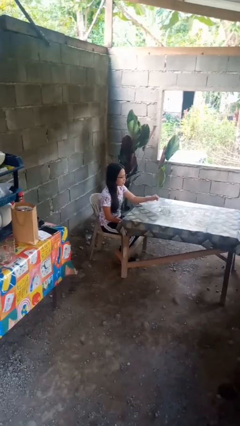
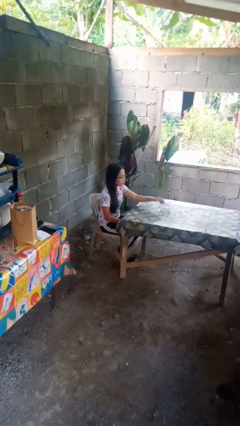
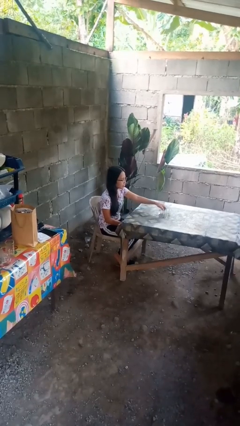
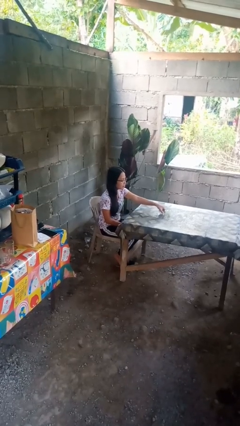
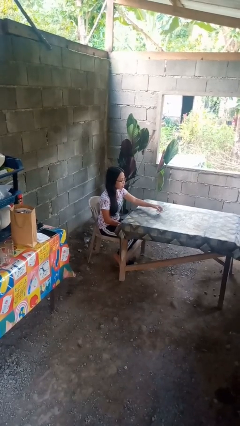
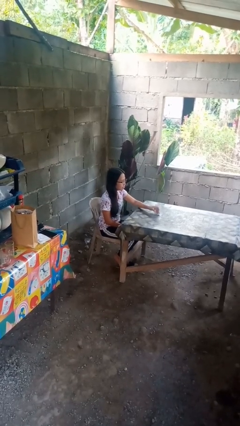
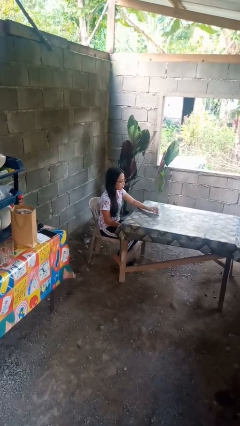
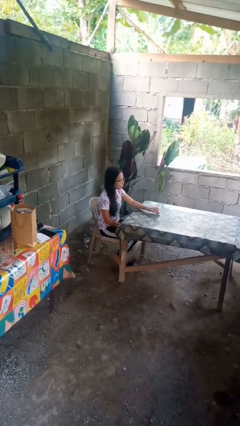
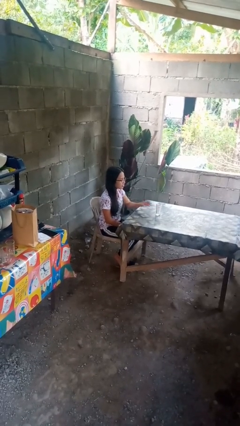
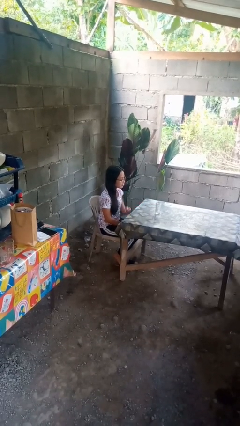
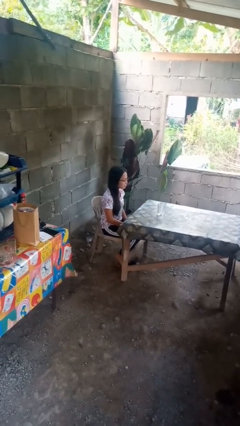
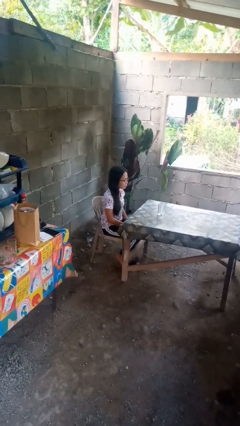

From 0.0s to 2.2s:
person sets upright glass

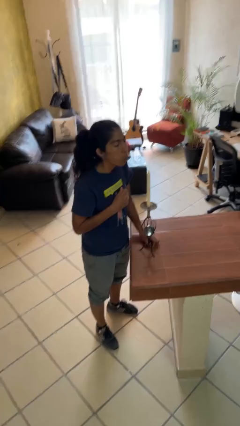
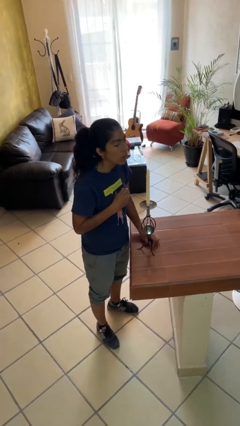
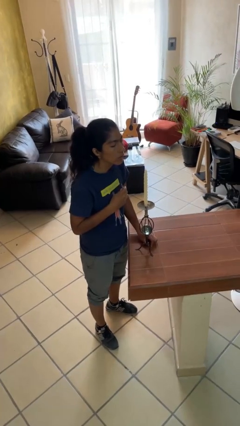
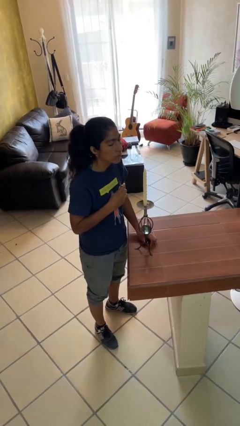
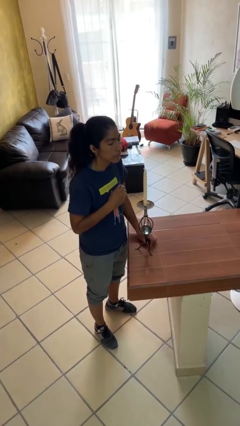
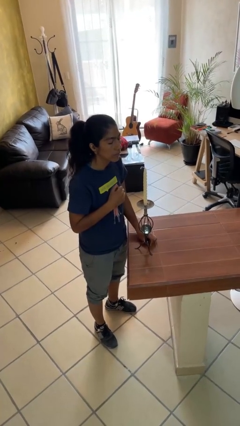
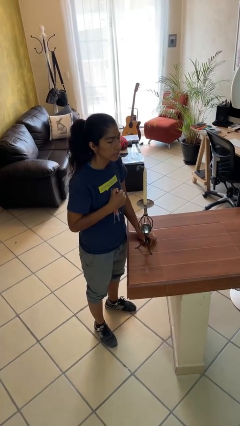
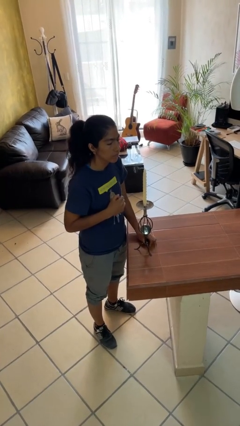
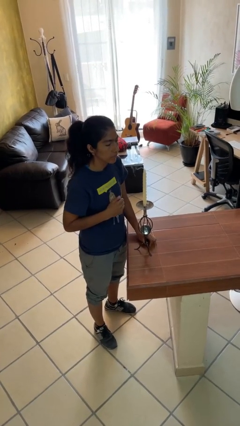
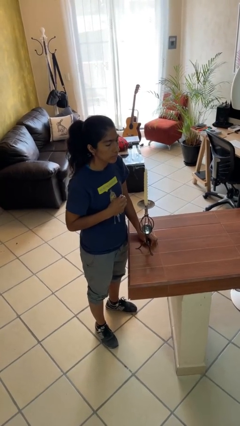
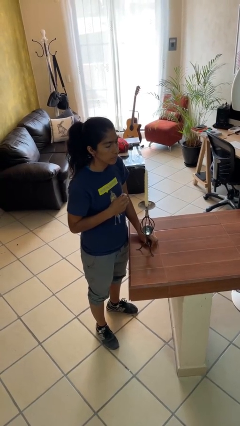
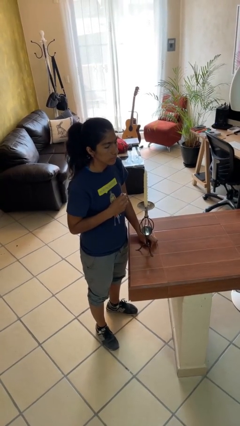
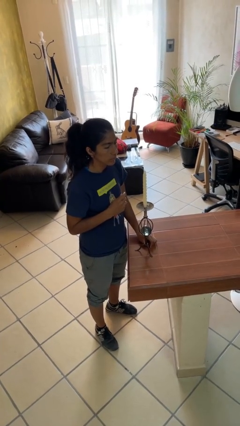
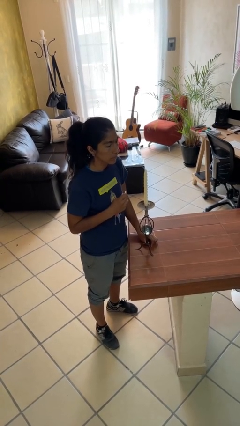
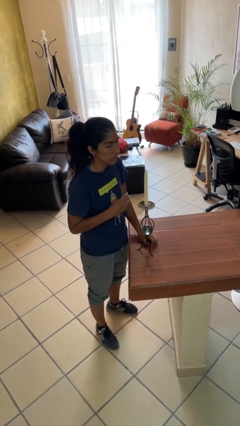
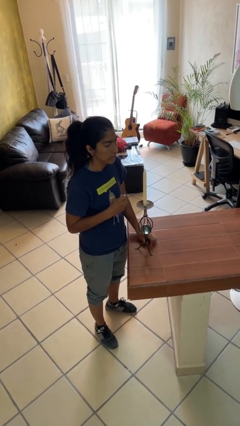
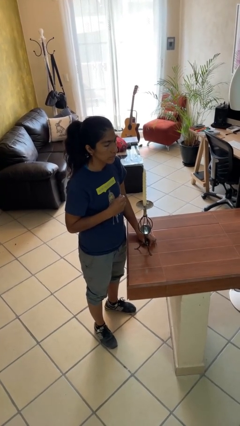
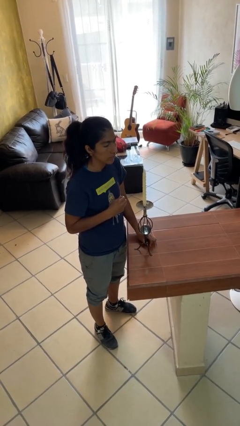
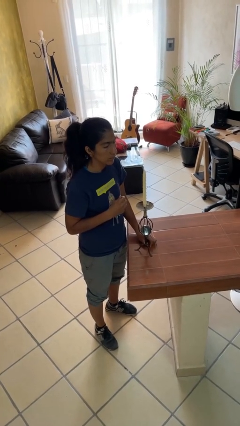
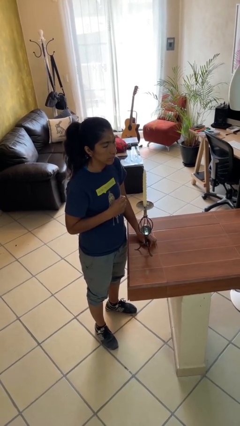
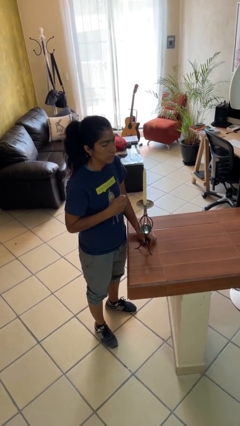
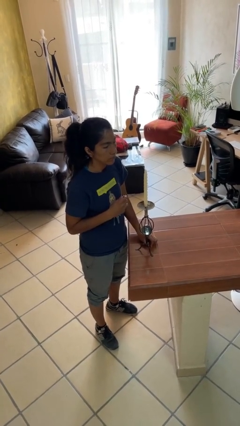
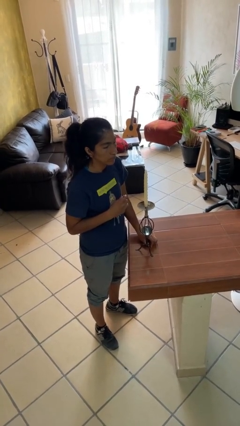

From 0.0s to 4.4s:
person extinguishes candle

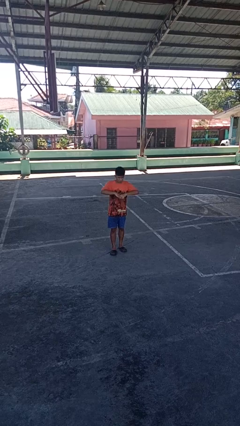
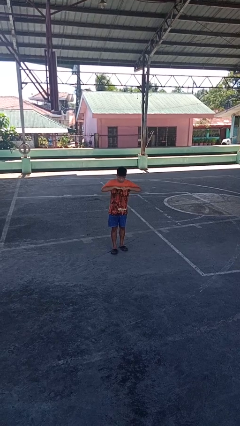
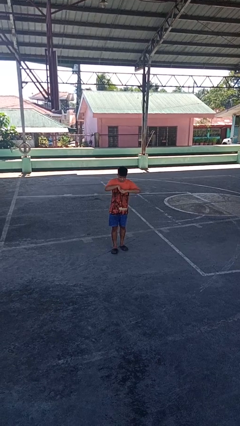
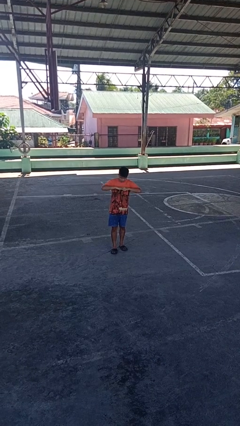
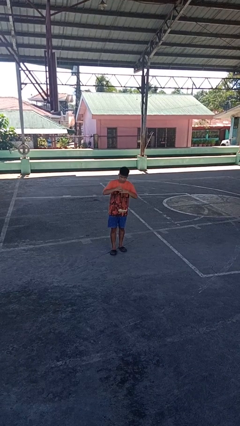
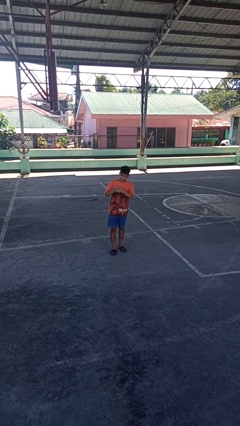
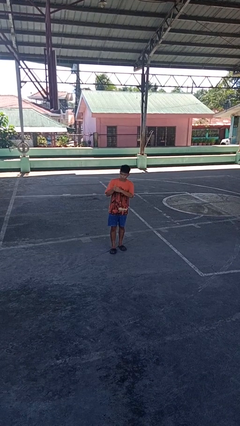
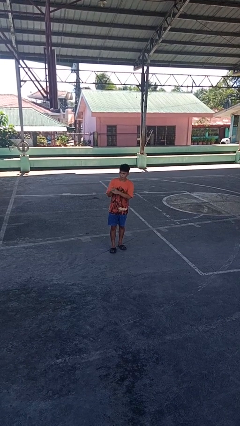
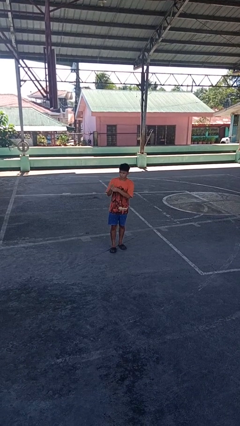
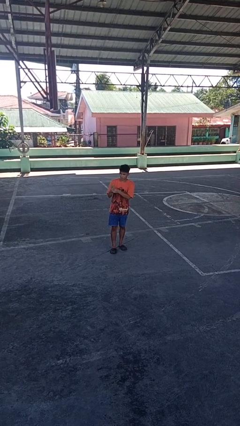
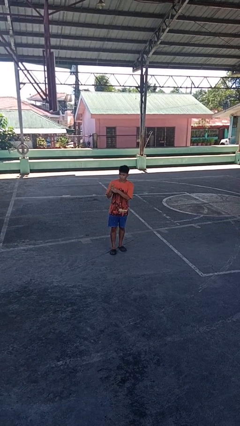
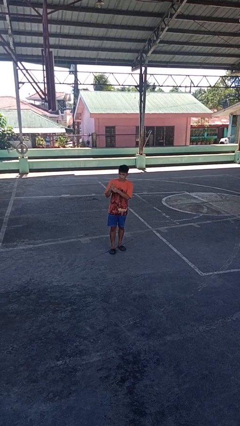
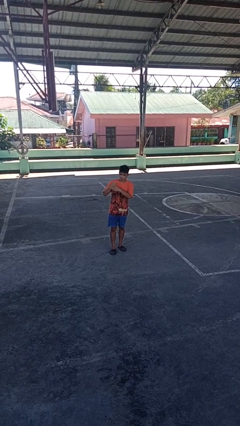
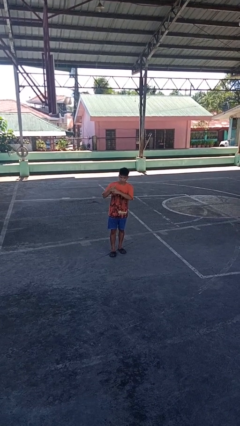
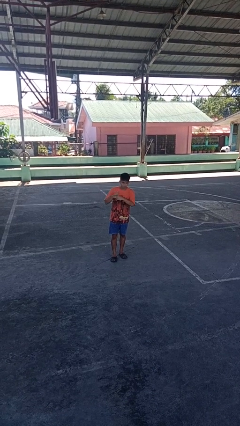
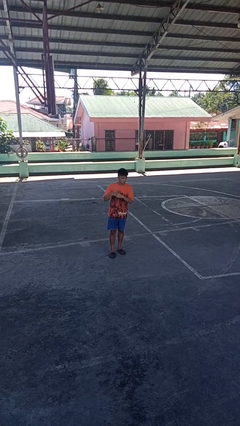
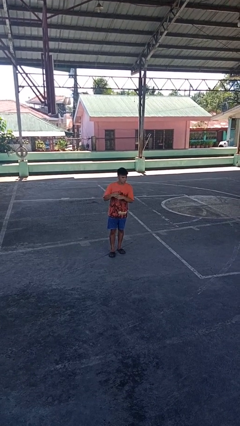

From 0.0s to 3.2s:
person cracks knuckles

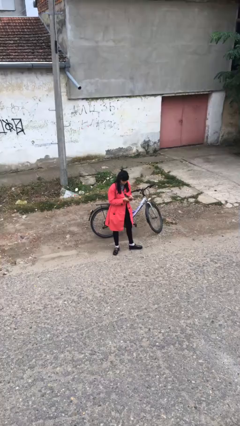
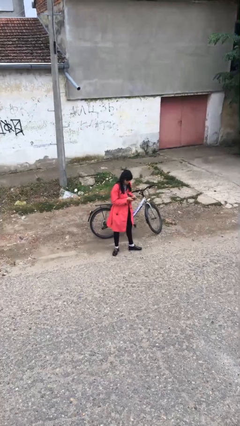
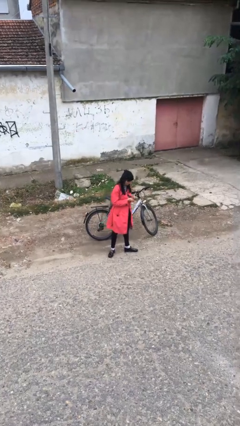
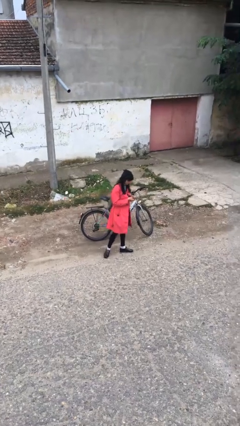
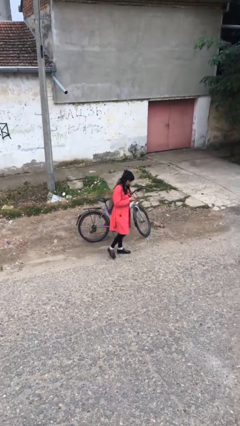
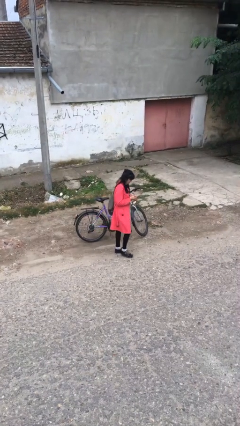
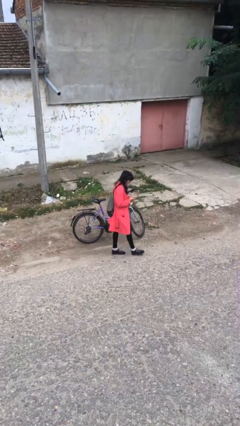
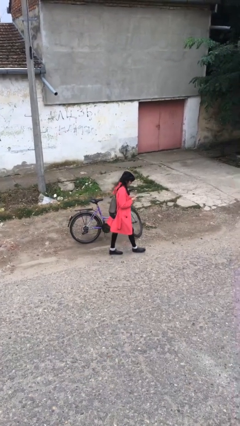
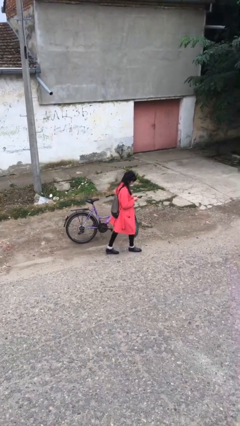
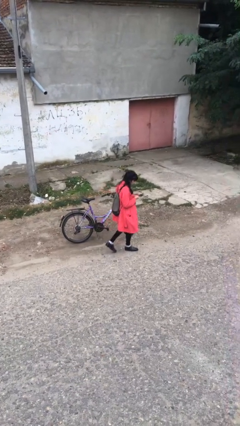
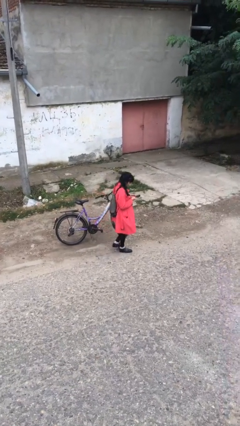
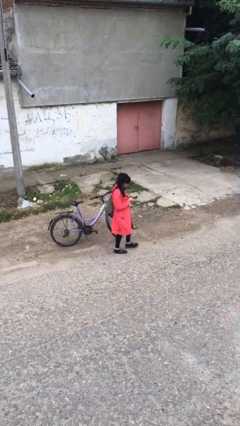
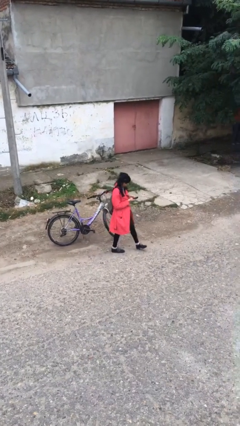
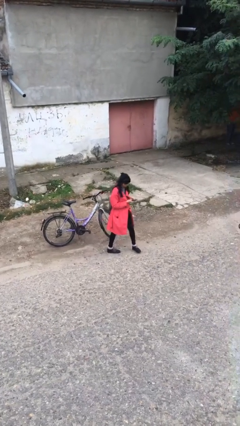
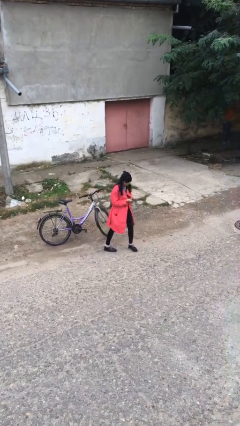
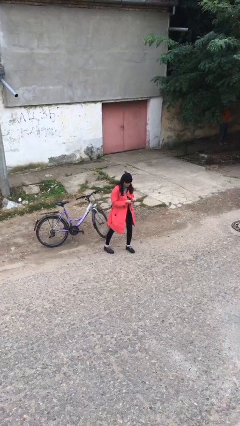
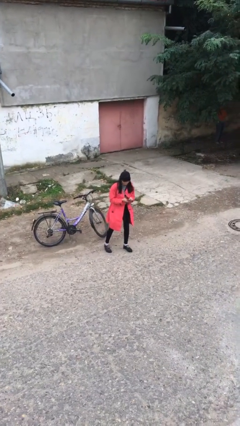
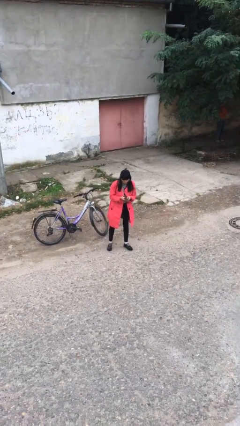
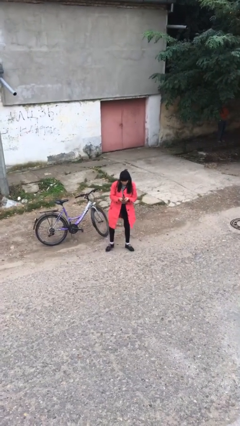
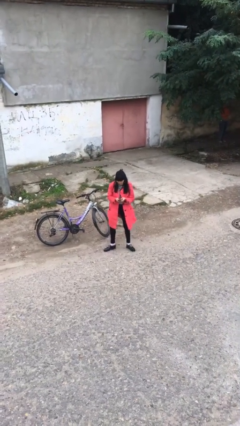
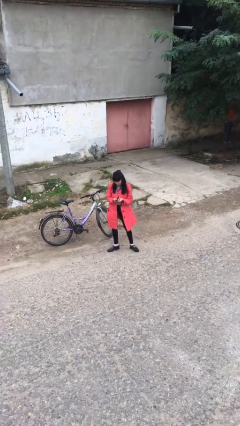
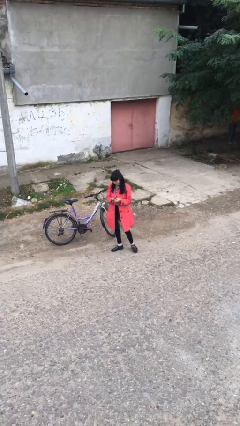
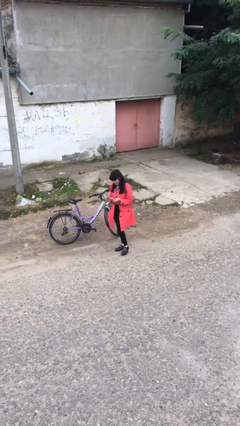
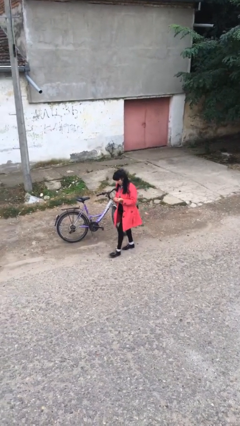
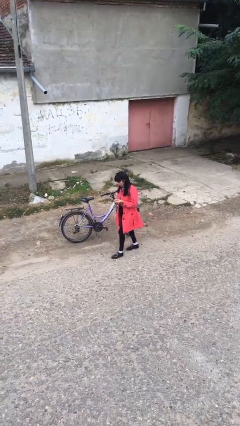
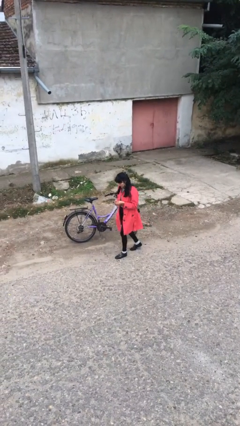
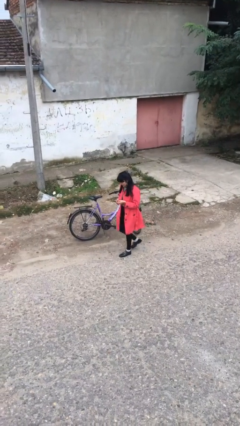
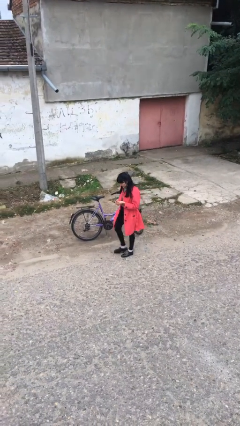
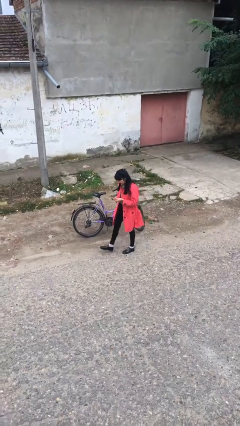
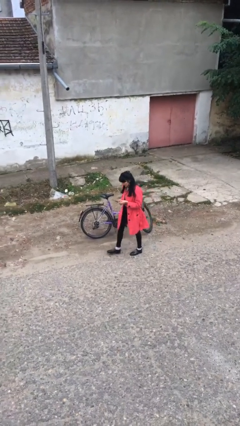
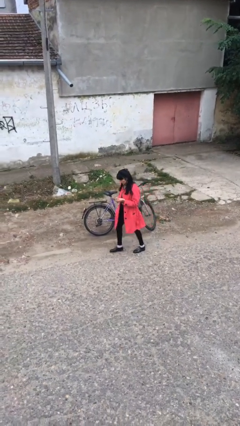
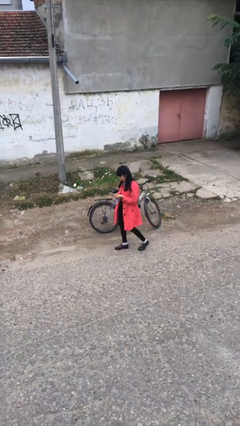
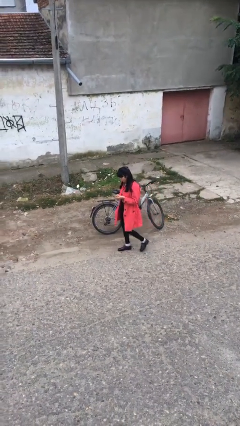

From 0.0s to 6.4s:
person texts on phone

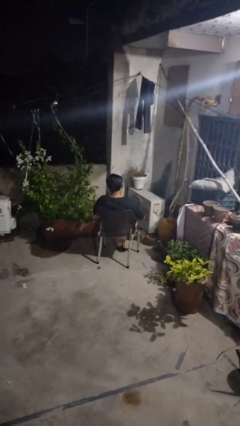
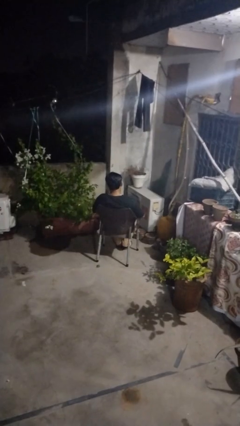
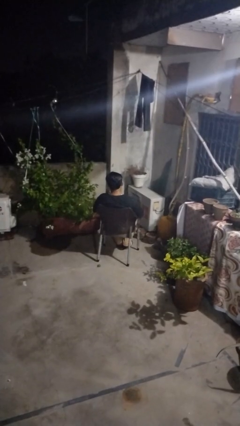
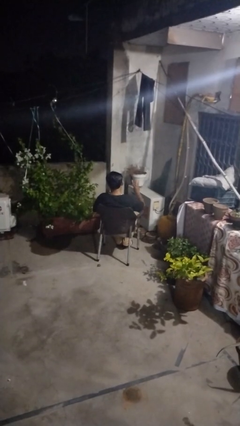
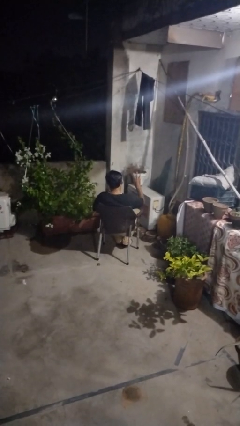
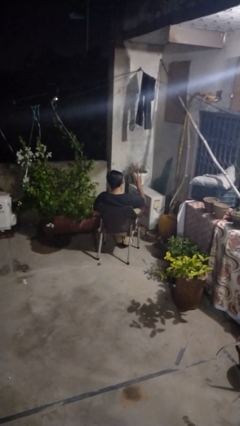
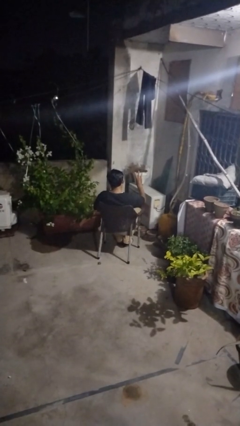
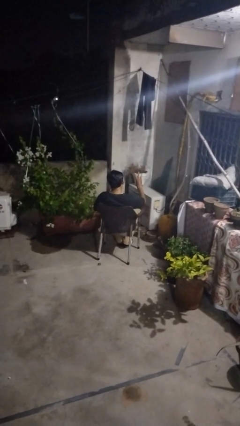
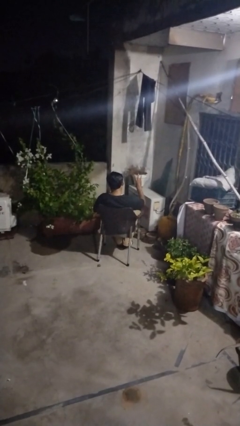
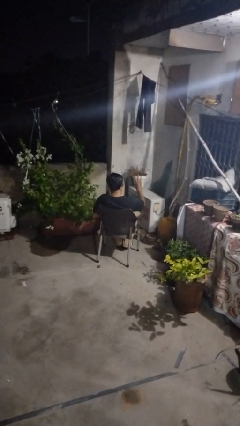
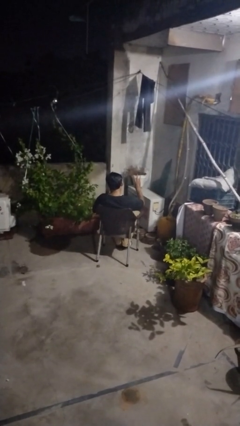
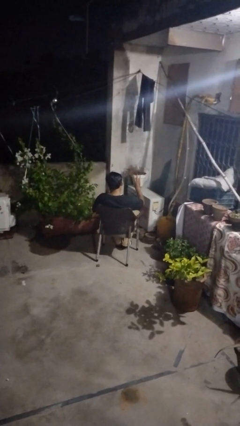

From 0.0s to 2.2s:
person gestures number three
